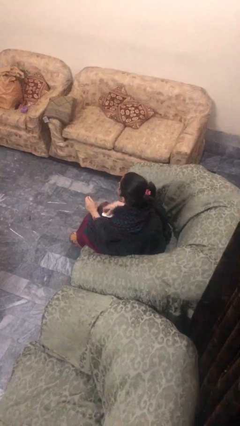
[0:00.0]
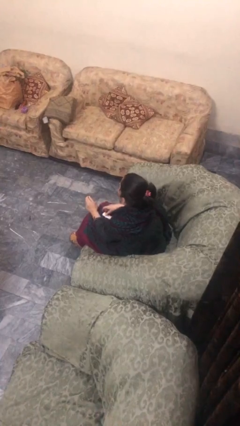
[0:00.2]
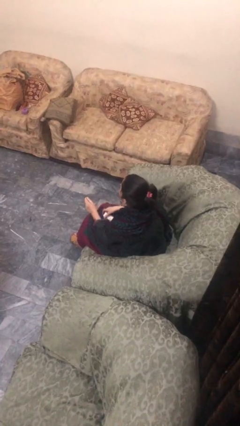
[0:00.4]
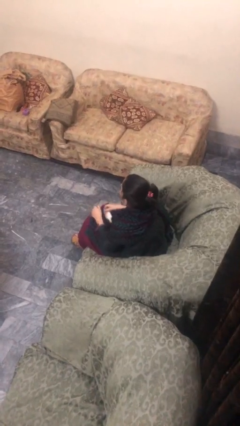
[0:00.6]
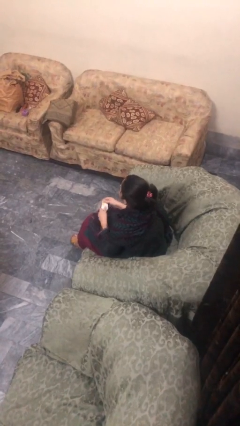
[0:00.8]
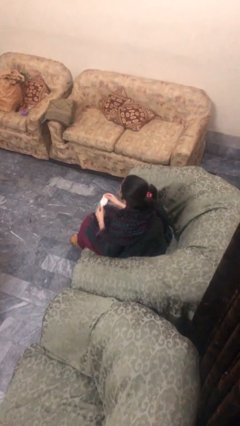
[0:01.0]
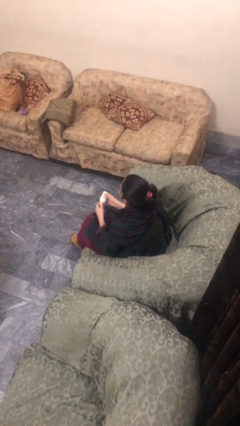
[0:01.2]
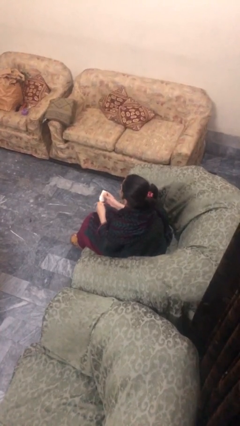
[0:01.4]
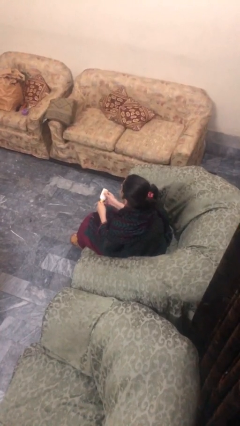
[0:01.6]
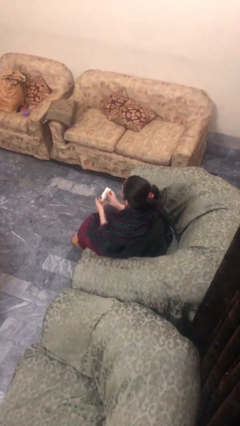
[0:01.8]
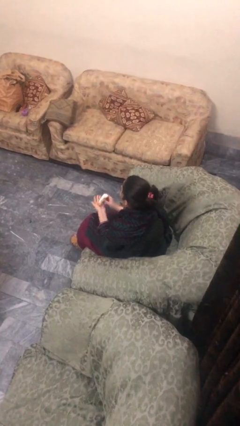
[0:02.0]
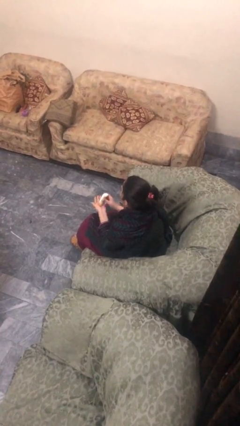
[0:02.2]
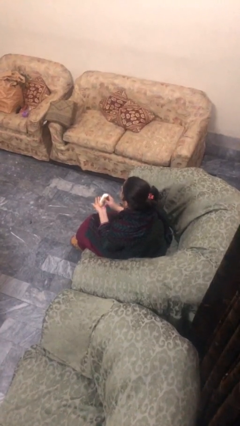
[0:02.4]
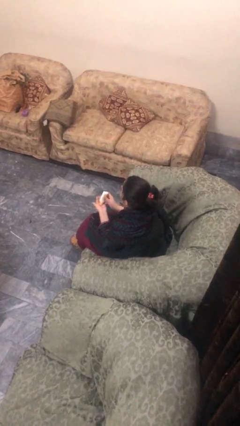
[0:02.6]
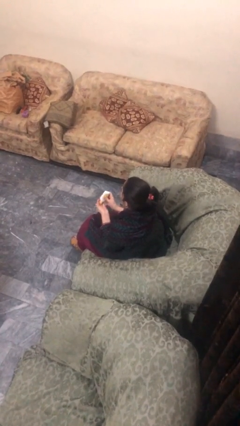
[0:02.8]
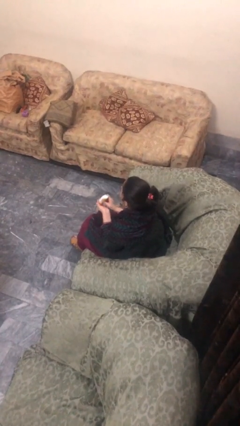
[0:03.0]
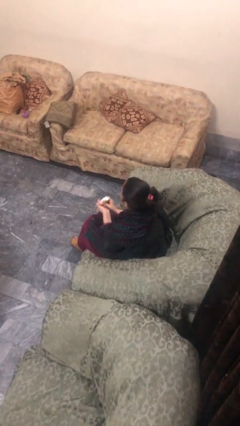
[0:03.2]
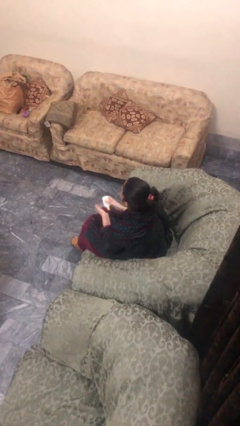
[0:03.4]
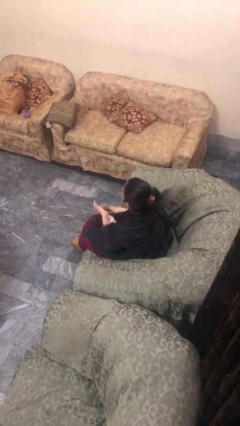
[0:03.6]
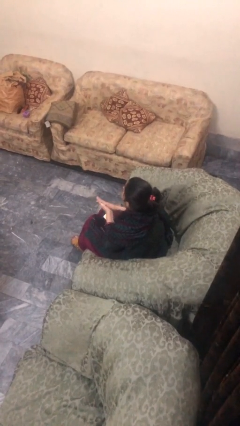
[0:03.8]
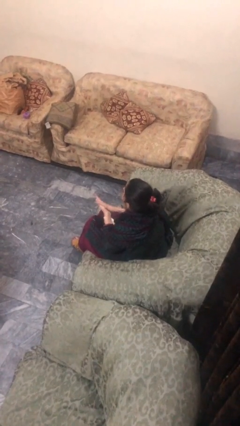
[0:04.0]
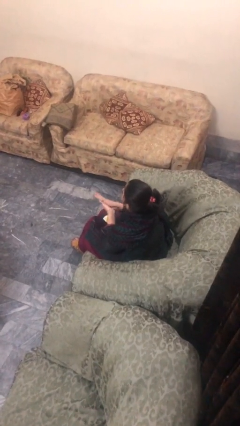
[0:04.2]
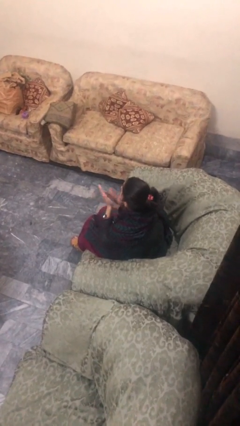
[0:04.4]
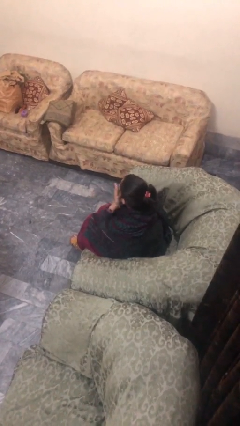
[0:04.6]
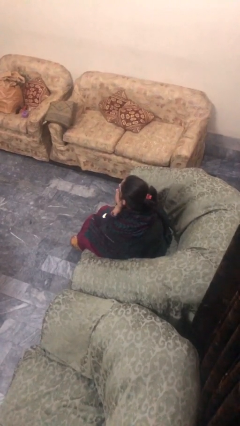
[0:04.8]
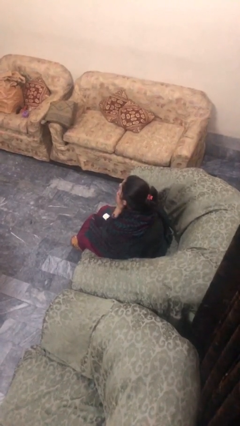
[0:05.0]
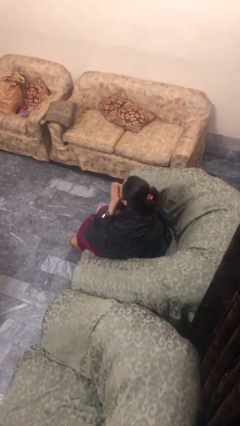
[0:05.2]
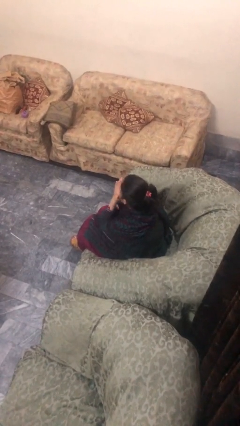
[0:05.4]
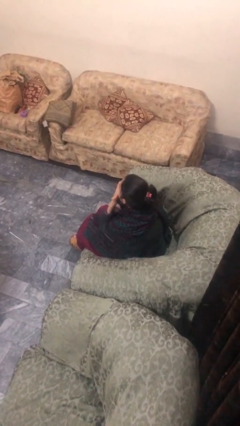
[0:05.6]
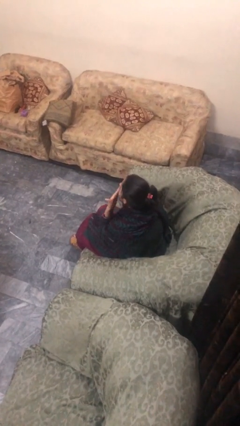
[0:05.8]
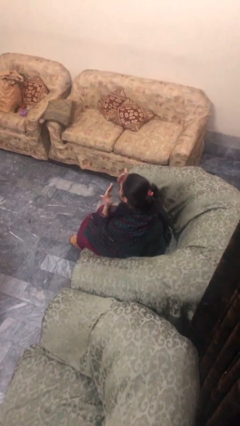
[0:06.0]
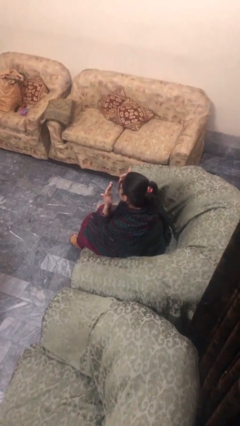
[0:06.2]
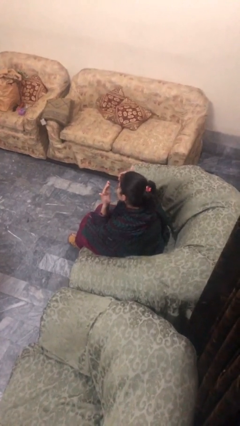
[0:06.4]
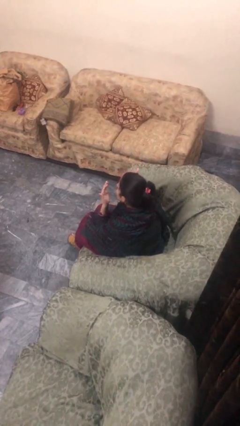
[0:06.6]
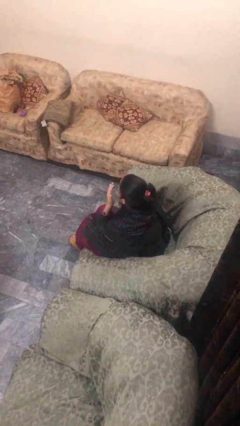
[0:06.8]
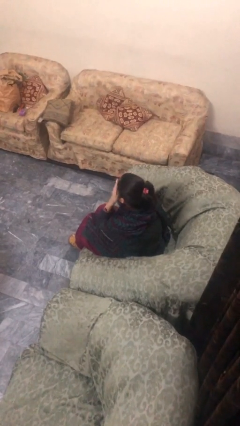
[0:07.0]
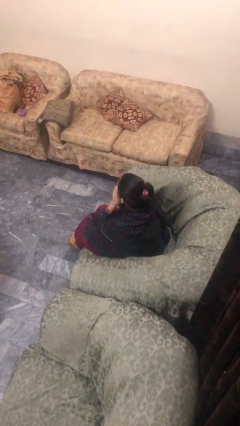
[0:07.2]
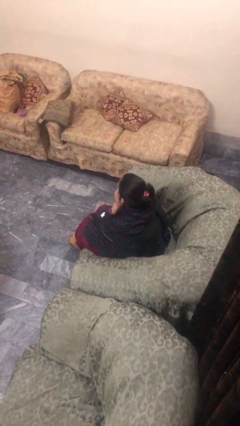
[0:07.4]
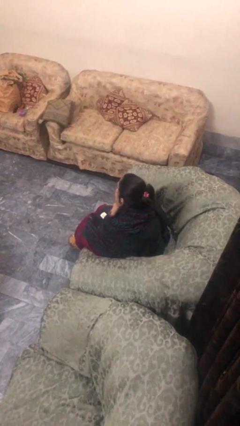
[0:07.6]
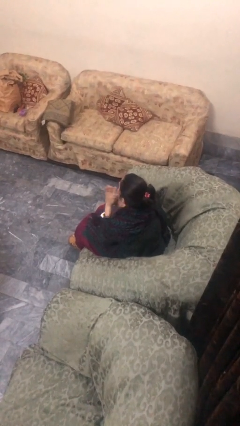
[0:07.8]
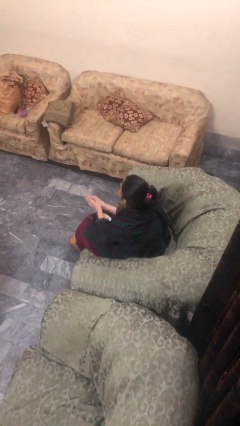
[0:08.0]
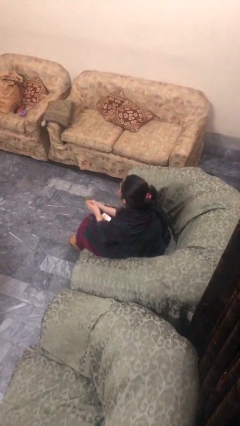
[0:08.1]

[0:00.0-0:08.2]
person applies sunscreen

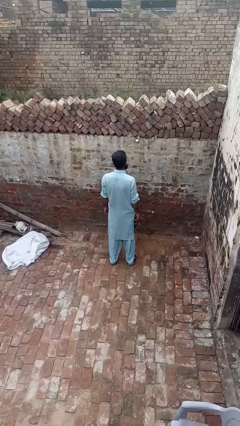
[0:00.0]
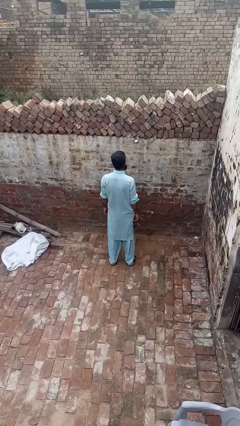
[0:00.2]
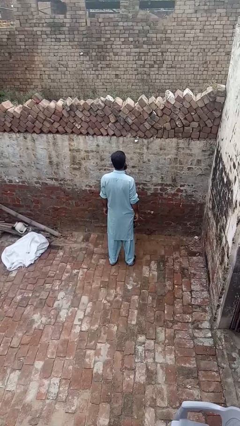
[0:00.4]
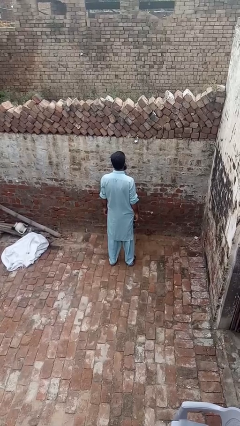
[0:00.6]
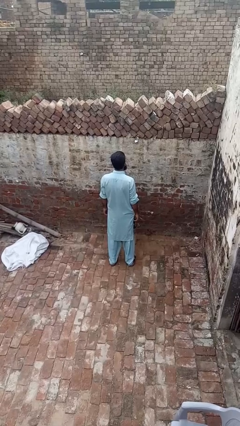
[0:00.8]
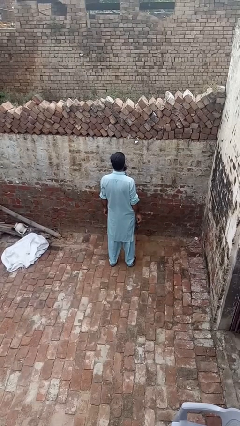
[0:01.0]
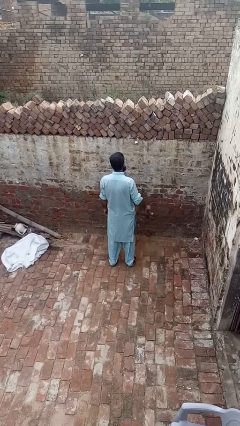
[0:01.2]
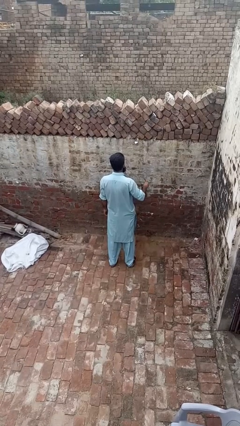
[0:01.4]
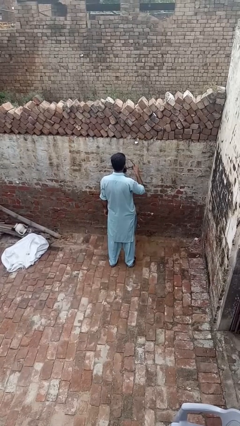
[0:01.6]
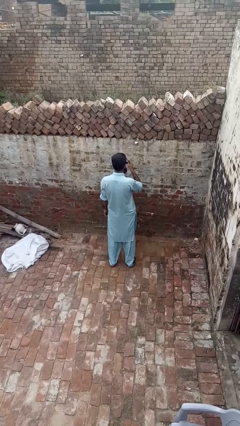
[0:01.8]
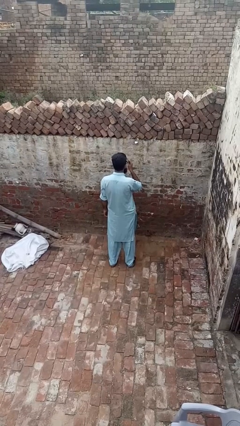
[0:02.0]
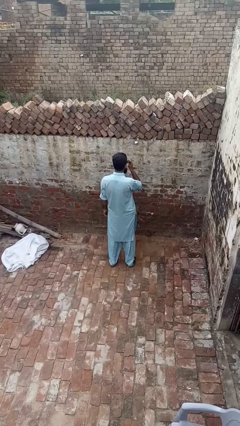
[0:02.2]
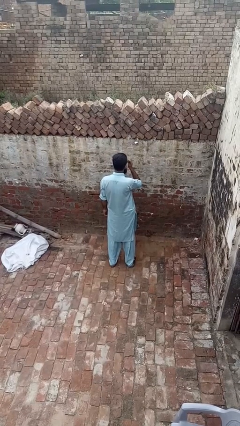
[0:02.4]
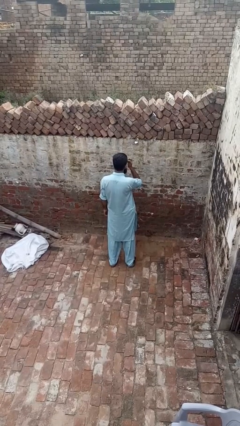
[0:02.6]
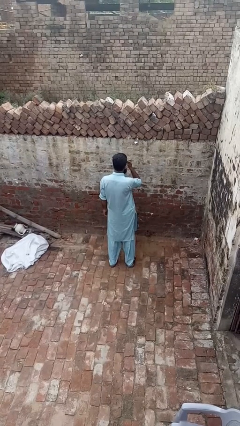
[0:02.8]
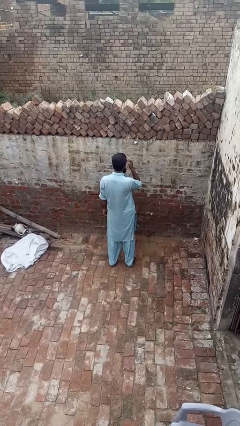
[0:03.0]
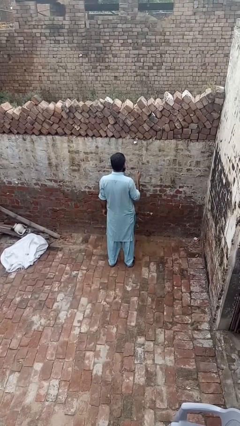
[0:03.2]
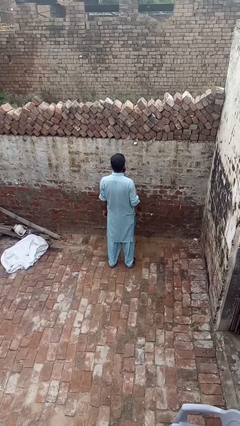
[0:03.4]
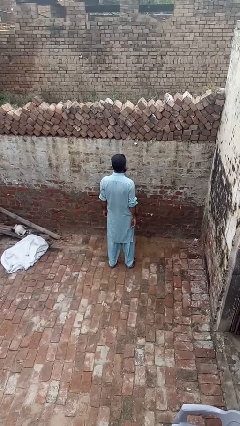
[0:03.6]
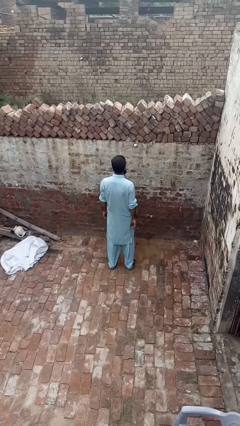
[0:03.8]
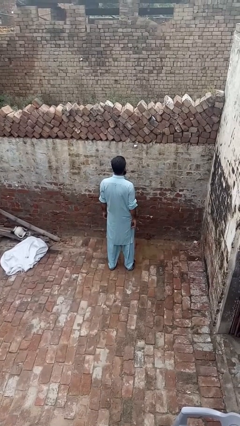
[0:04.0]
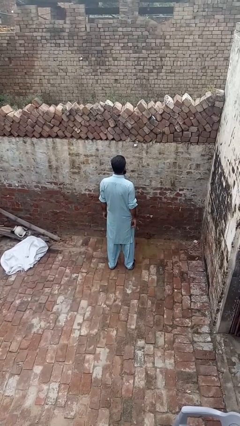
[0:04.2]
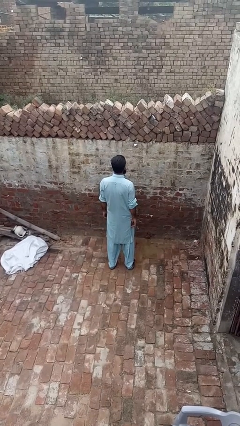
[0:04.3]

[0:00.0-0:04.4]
person puts on sunglasses

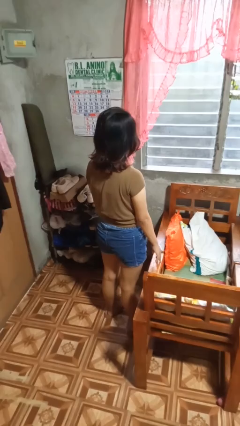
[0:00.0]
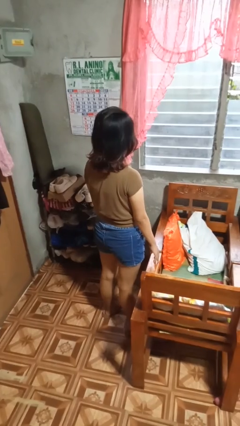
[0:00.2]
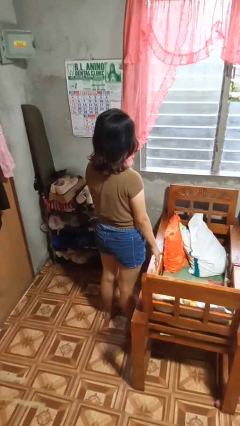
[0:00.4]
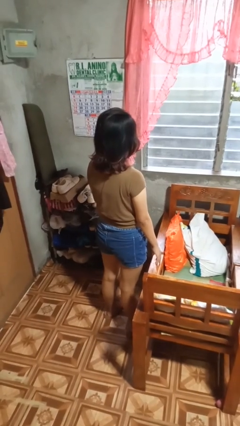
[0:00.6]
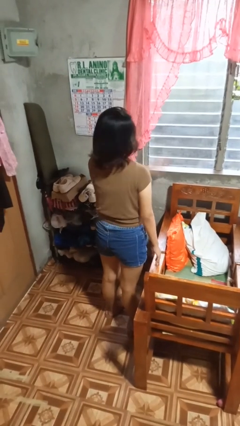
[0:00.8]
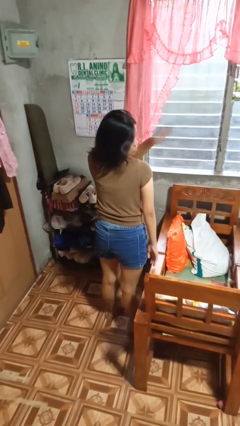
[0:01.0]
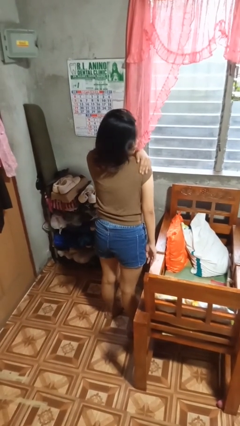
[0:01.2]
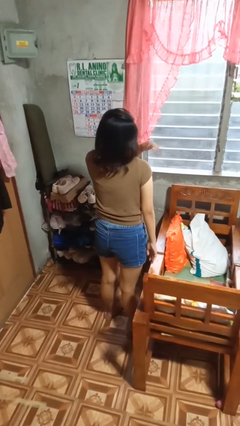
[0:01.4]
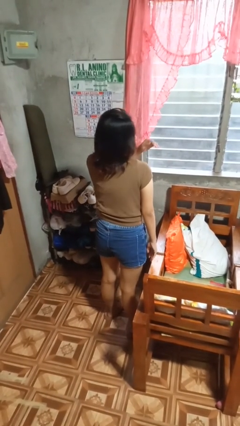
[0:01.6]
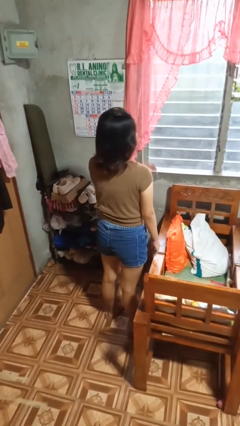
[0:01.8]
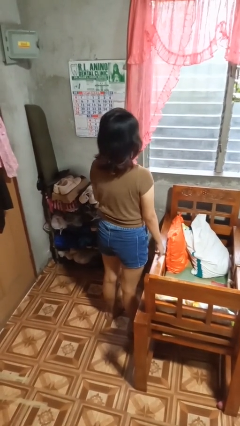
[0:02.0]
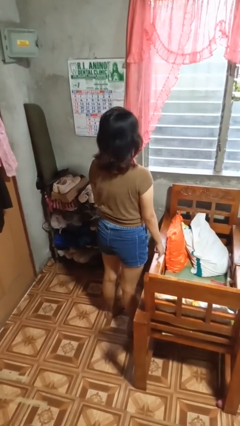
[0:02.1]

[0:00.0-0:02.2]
person swats bug

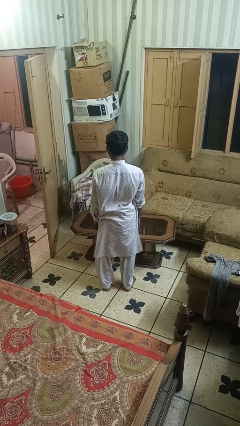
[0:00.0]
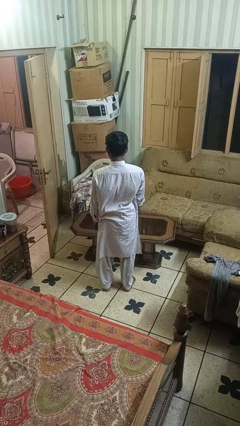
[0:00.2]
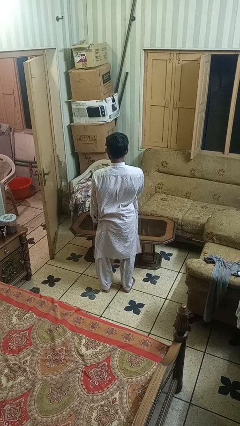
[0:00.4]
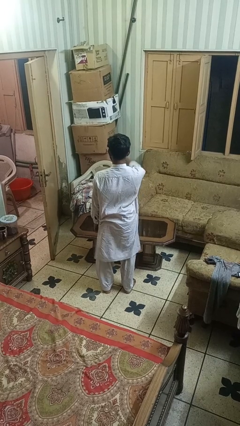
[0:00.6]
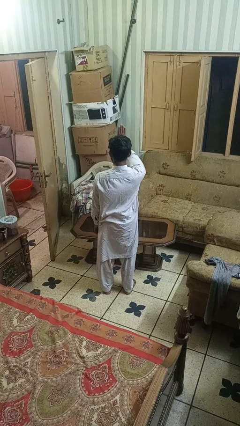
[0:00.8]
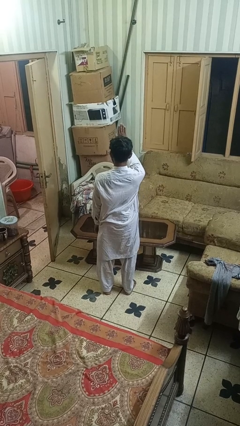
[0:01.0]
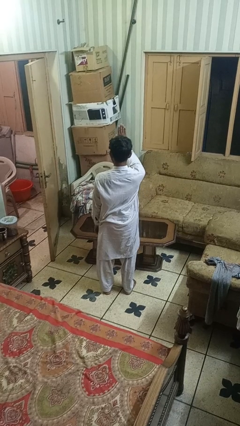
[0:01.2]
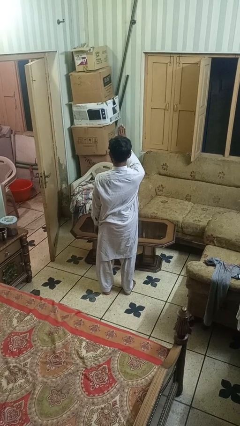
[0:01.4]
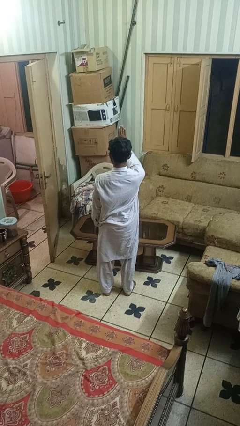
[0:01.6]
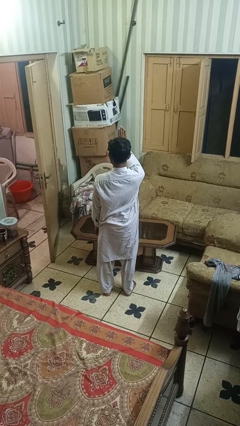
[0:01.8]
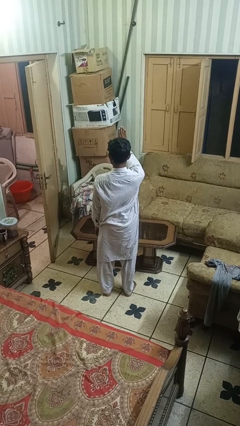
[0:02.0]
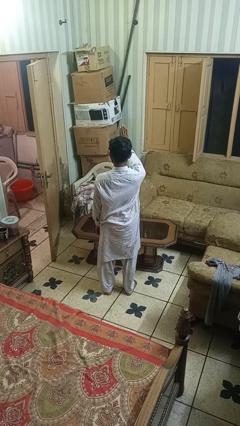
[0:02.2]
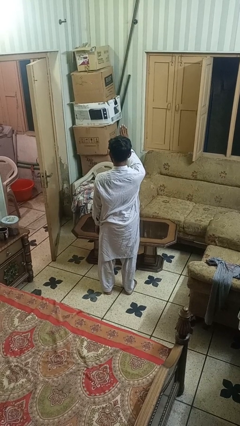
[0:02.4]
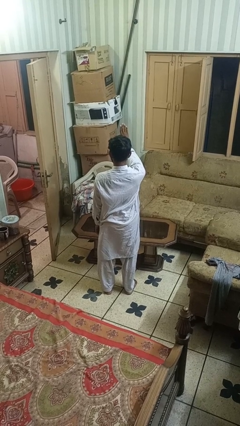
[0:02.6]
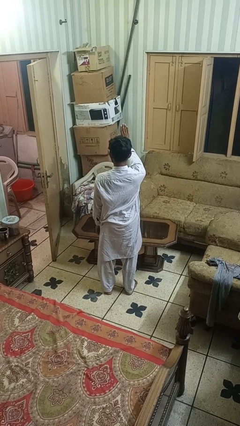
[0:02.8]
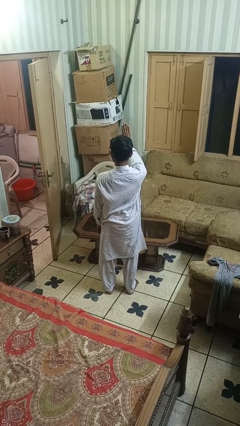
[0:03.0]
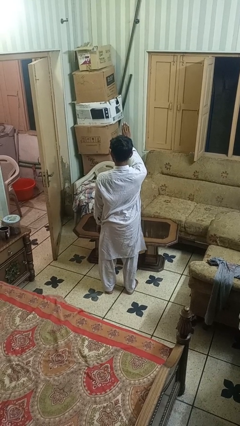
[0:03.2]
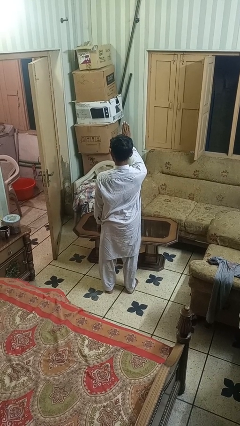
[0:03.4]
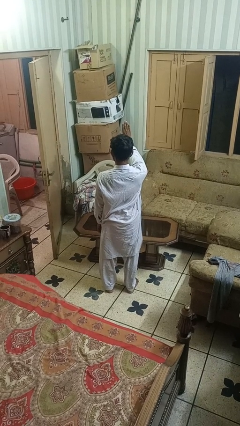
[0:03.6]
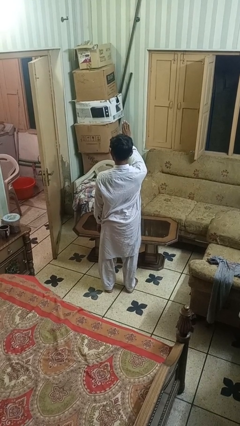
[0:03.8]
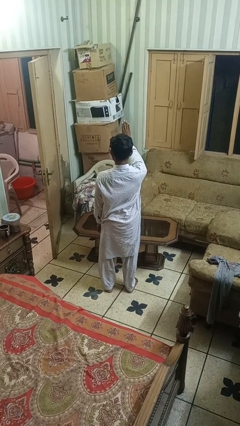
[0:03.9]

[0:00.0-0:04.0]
person gestures stop
